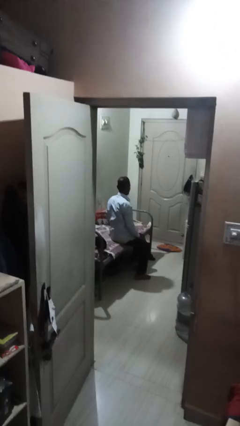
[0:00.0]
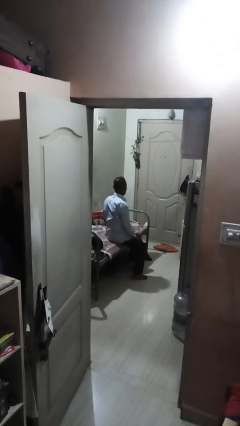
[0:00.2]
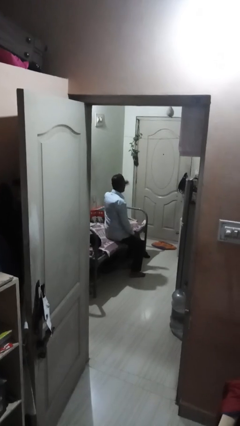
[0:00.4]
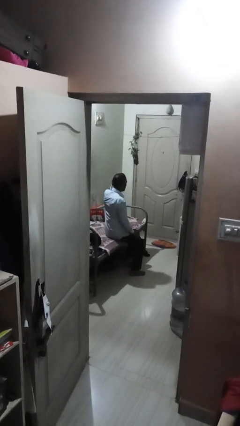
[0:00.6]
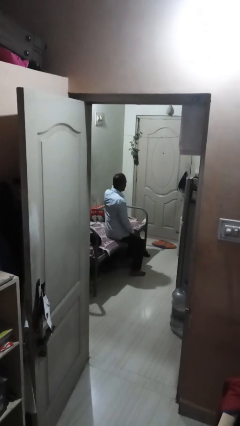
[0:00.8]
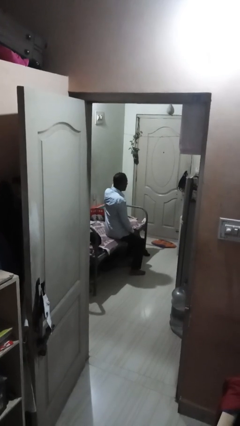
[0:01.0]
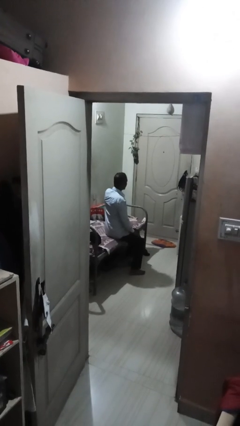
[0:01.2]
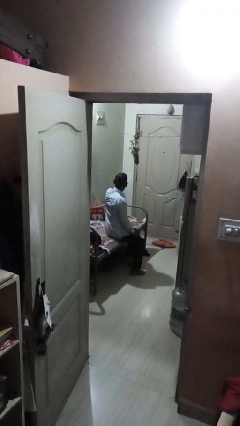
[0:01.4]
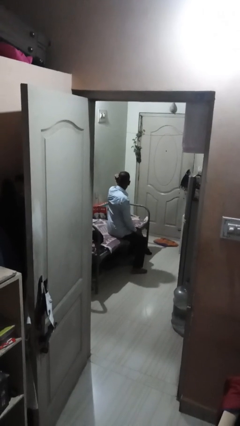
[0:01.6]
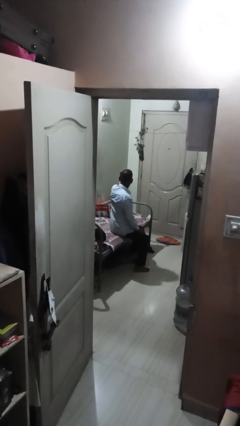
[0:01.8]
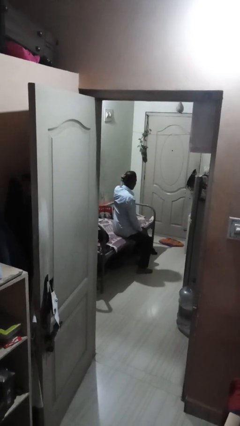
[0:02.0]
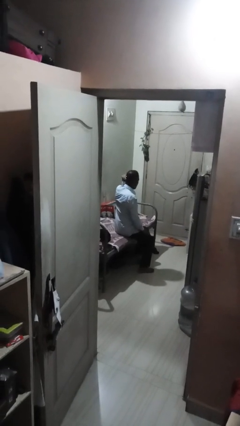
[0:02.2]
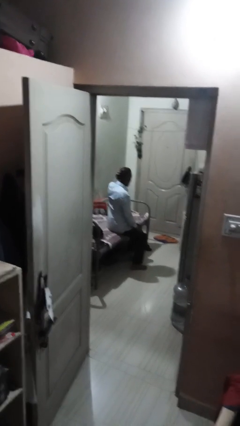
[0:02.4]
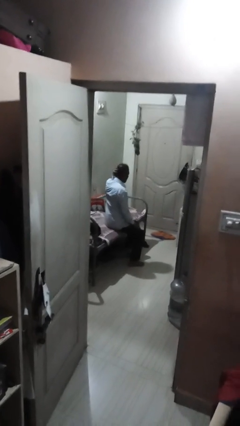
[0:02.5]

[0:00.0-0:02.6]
person strokes hair

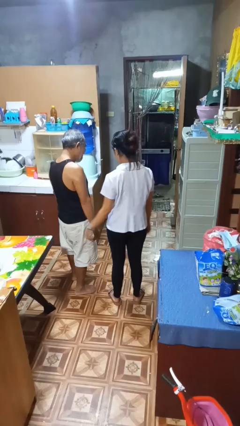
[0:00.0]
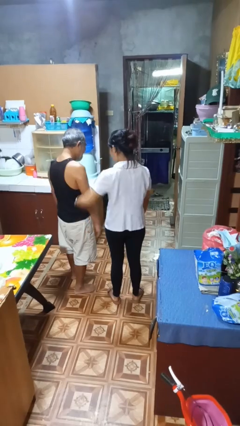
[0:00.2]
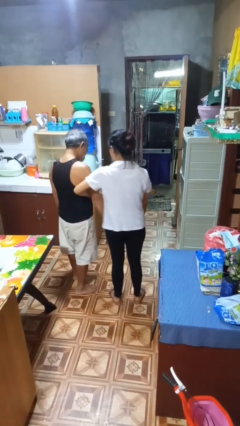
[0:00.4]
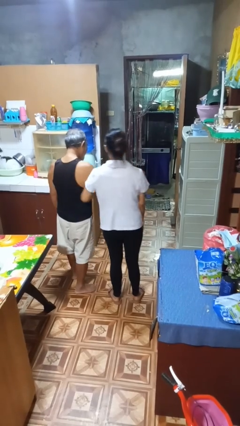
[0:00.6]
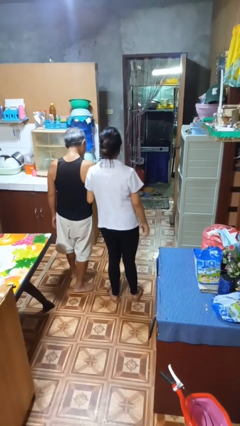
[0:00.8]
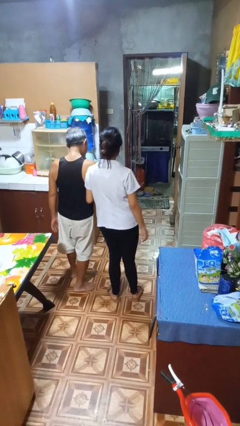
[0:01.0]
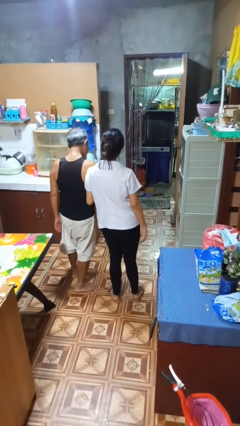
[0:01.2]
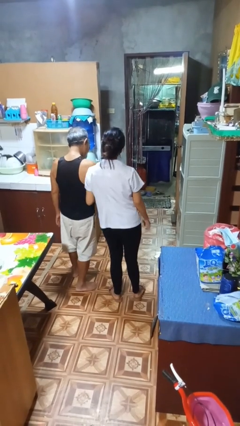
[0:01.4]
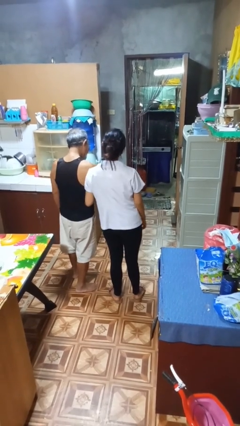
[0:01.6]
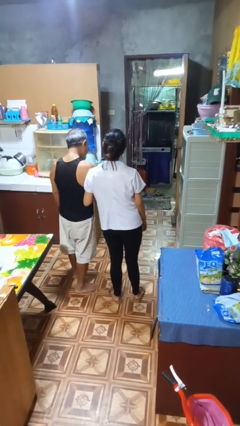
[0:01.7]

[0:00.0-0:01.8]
person grabs person by forearm

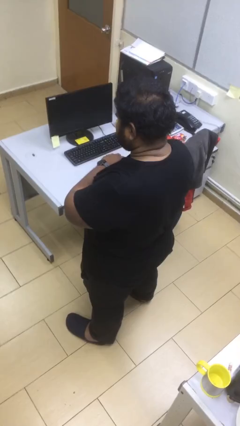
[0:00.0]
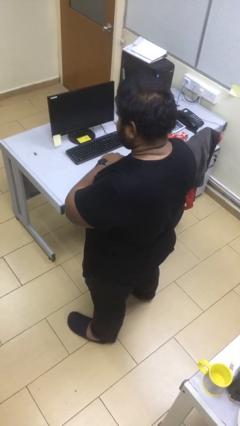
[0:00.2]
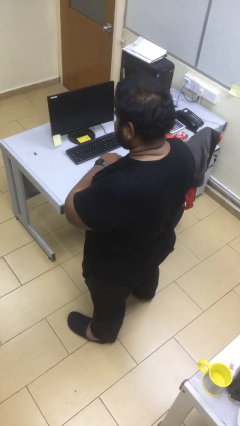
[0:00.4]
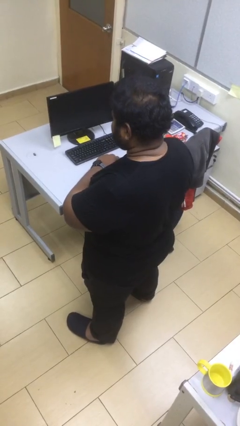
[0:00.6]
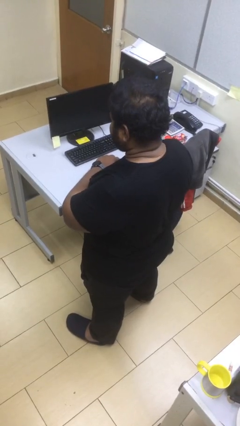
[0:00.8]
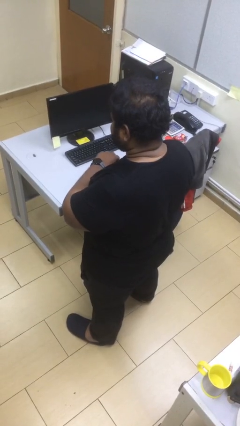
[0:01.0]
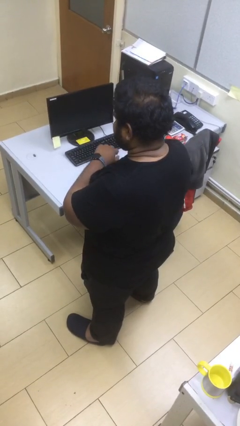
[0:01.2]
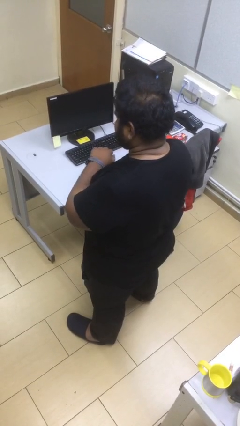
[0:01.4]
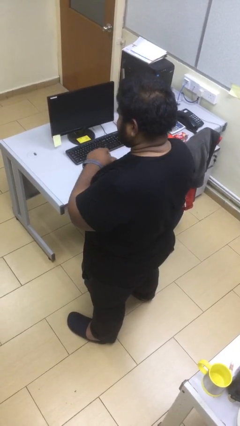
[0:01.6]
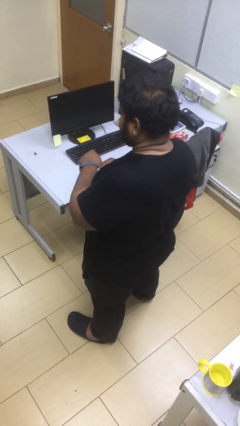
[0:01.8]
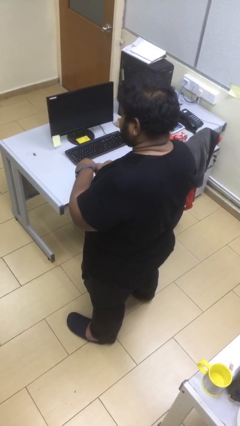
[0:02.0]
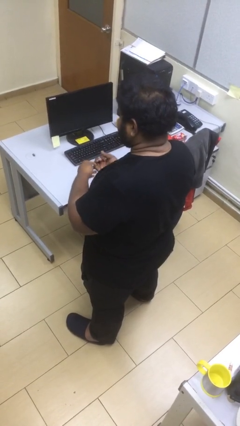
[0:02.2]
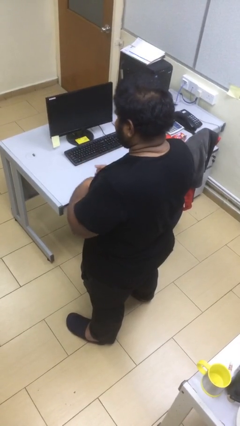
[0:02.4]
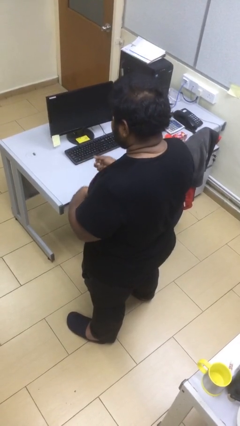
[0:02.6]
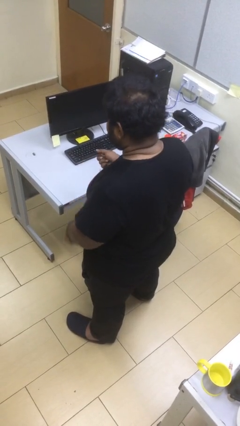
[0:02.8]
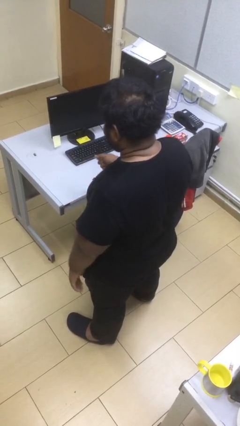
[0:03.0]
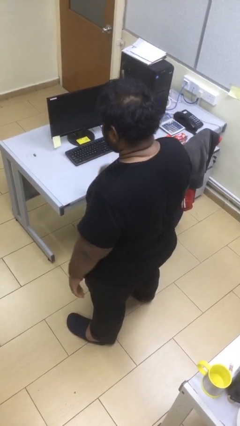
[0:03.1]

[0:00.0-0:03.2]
person takes off wristwatch

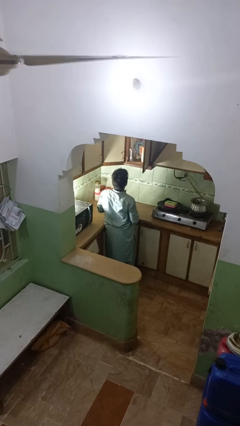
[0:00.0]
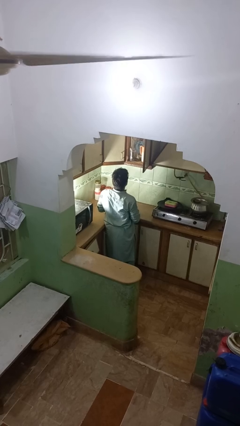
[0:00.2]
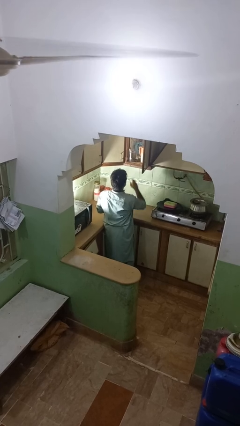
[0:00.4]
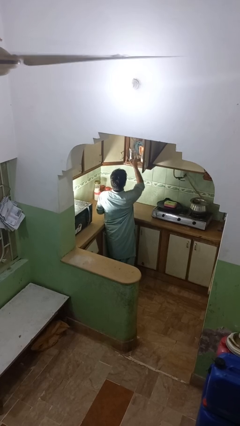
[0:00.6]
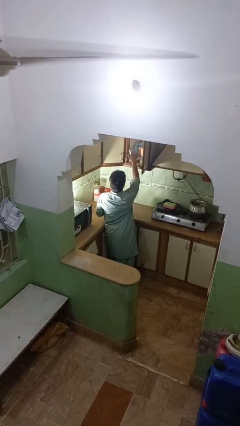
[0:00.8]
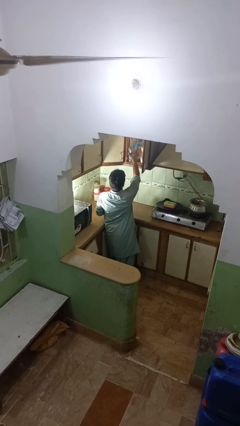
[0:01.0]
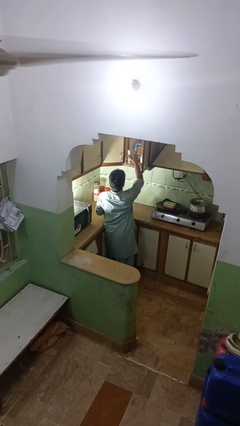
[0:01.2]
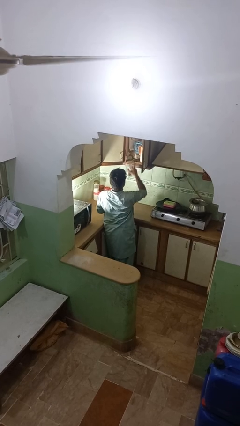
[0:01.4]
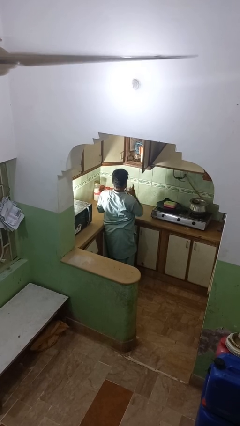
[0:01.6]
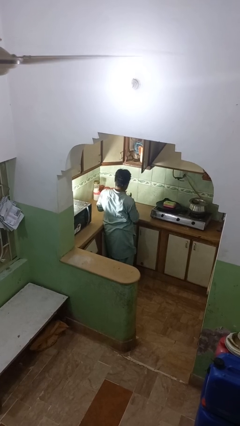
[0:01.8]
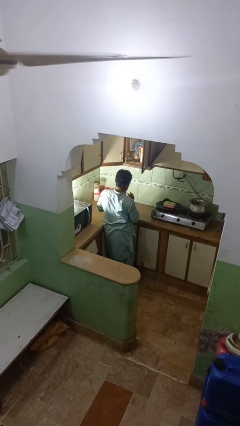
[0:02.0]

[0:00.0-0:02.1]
person takes object from kitchen drawer

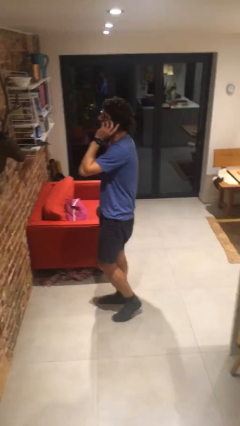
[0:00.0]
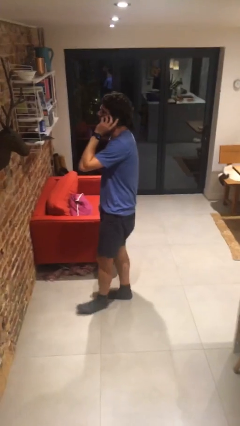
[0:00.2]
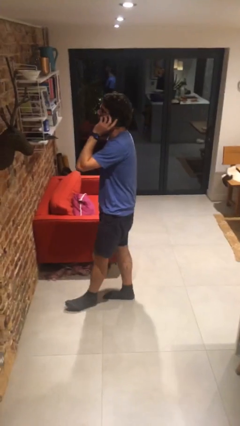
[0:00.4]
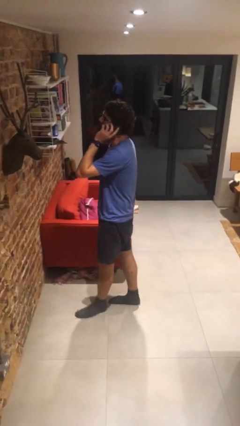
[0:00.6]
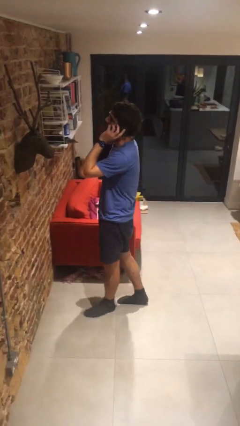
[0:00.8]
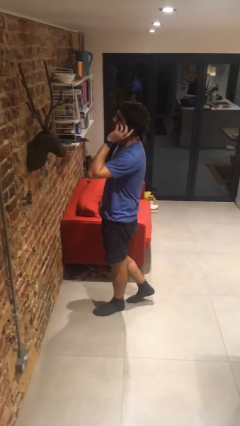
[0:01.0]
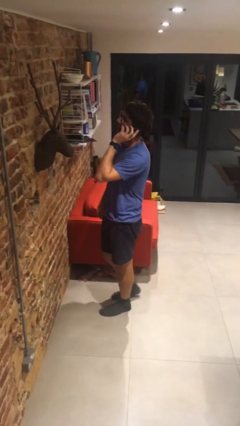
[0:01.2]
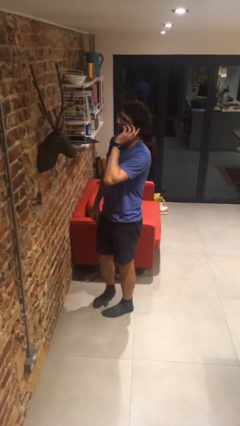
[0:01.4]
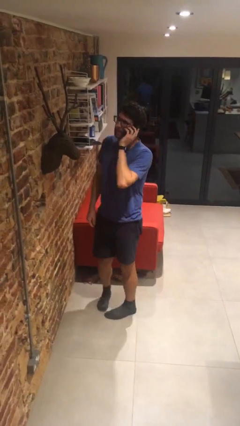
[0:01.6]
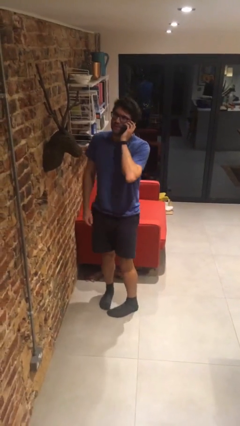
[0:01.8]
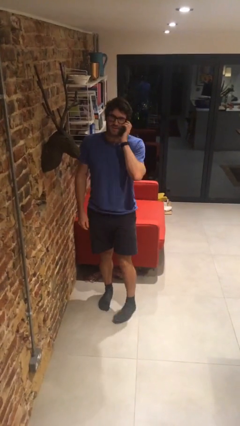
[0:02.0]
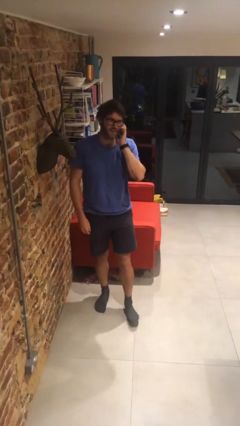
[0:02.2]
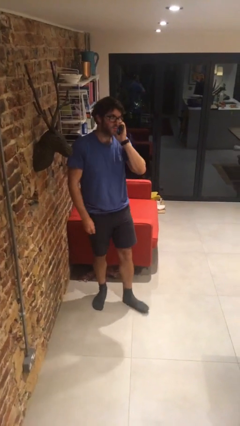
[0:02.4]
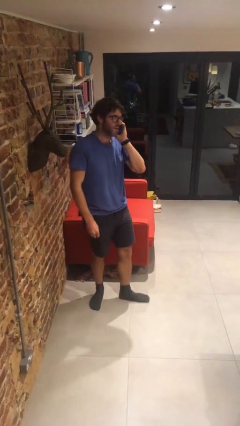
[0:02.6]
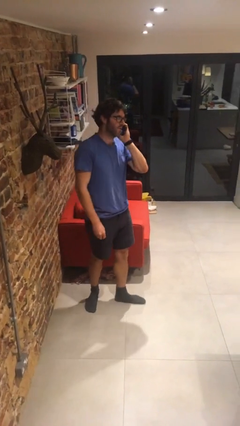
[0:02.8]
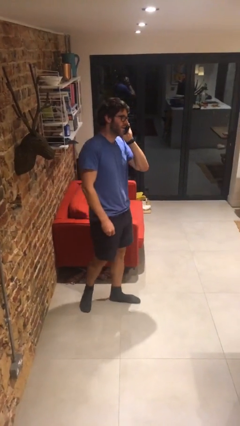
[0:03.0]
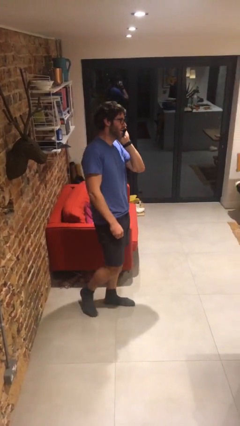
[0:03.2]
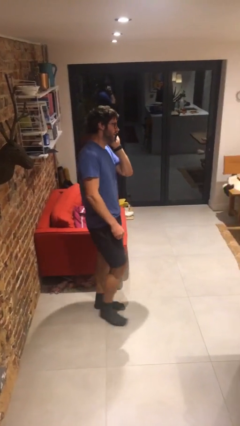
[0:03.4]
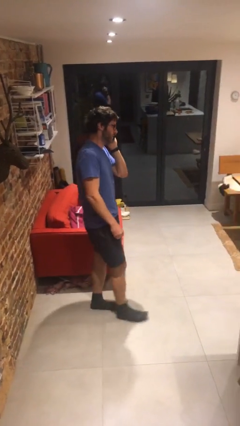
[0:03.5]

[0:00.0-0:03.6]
person talks on phone

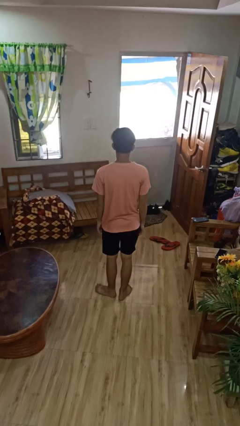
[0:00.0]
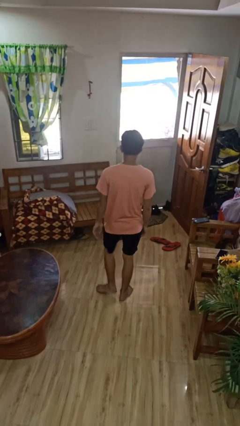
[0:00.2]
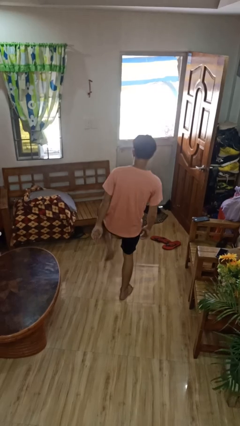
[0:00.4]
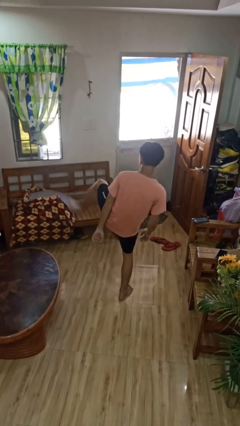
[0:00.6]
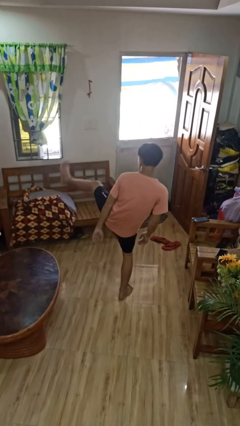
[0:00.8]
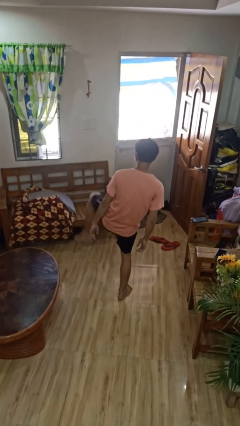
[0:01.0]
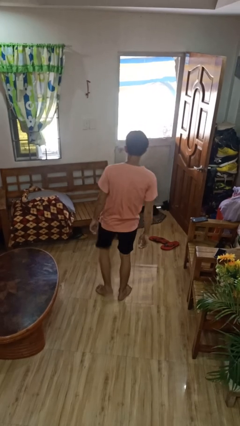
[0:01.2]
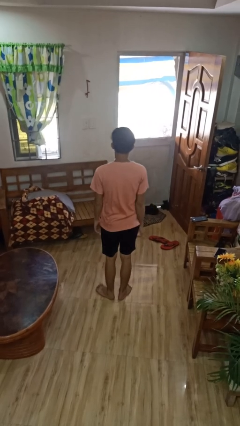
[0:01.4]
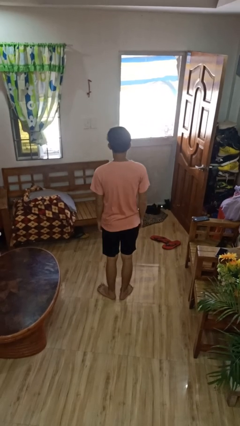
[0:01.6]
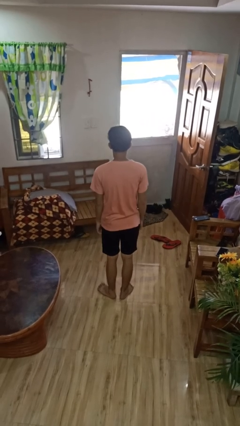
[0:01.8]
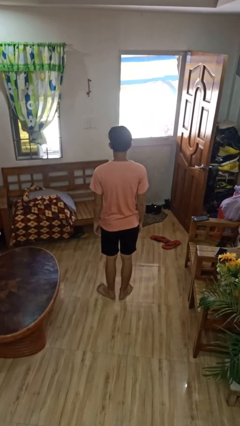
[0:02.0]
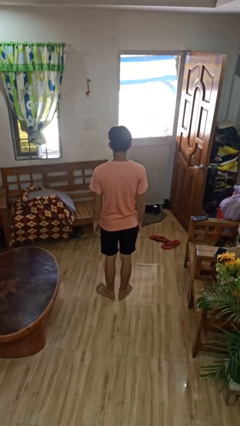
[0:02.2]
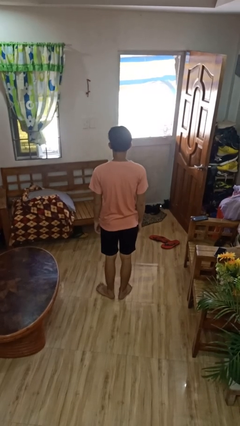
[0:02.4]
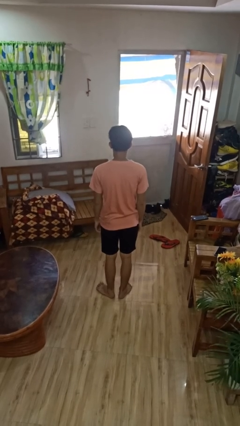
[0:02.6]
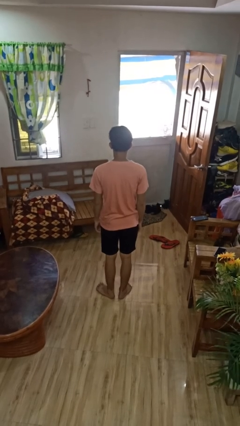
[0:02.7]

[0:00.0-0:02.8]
person karate kicks

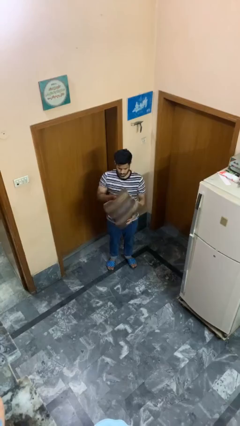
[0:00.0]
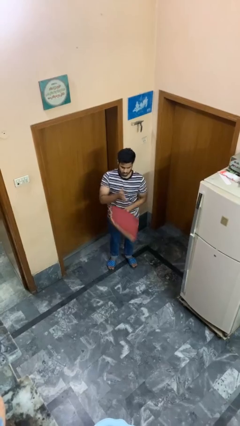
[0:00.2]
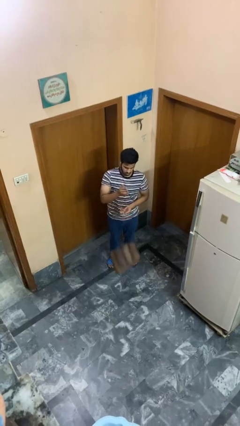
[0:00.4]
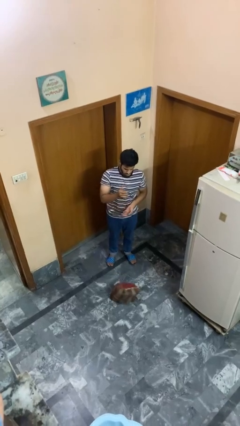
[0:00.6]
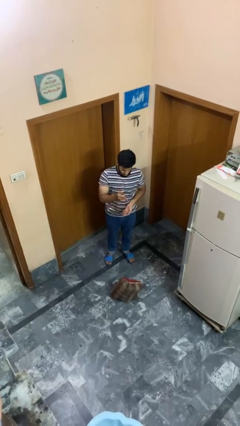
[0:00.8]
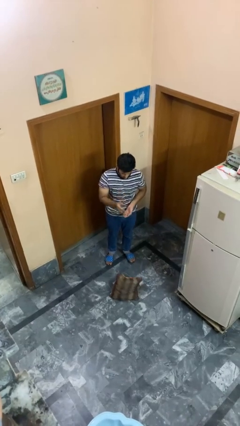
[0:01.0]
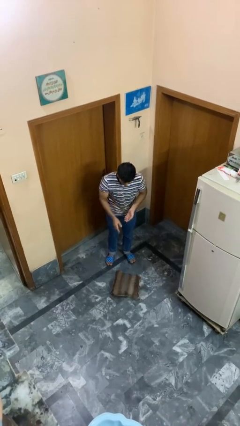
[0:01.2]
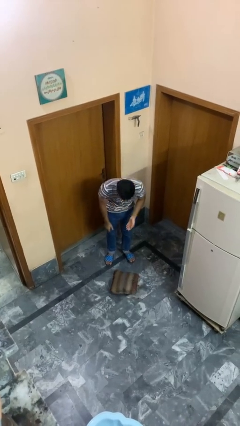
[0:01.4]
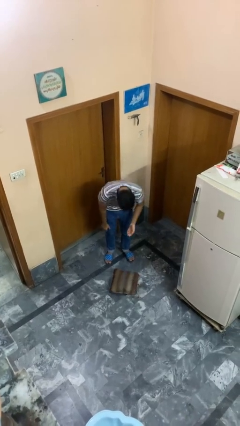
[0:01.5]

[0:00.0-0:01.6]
person drops object
